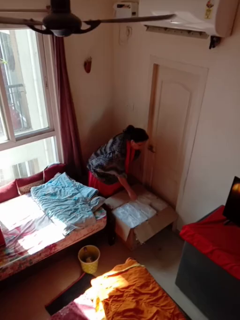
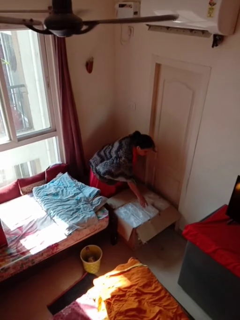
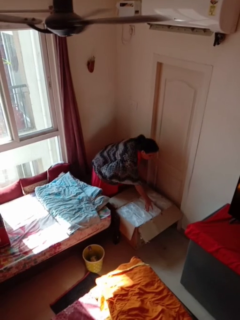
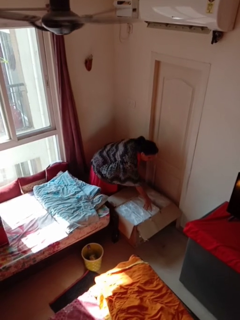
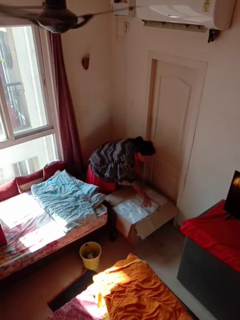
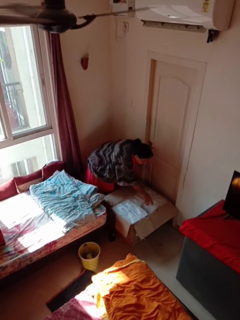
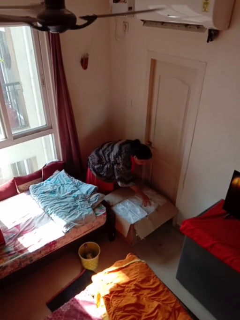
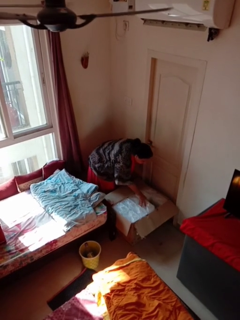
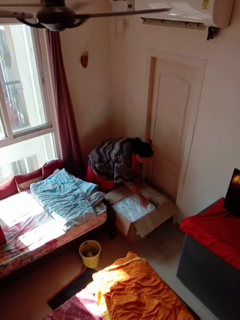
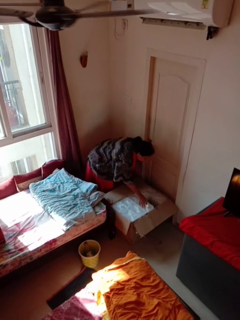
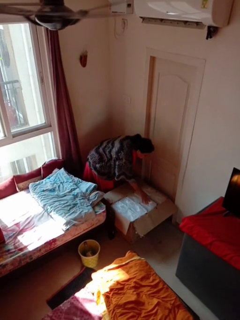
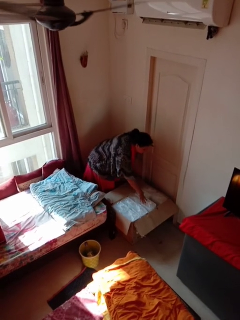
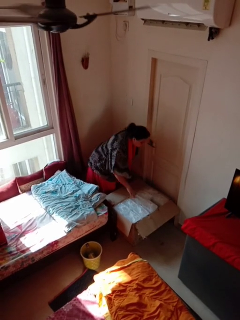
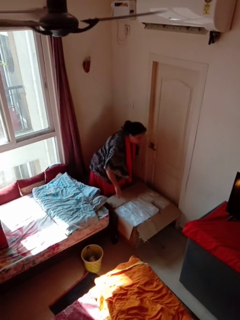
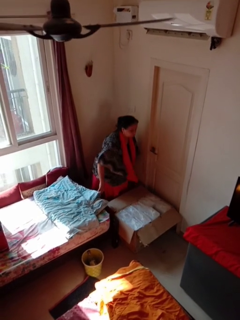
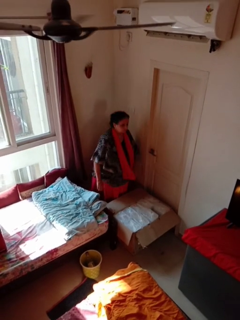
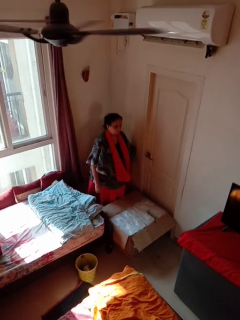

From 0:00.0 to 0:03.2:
person searches in box

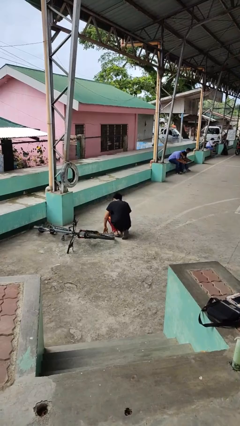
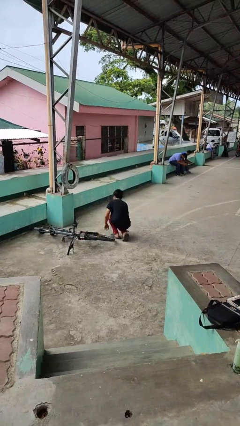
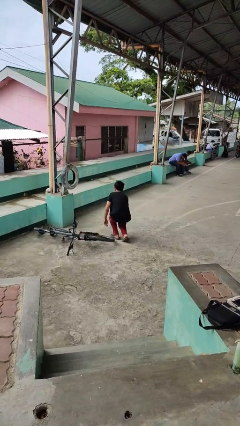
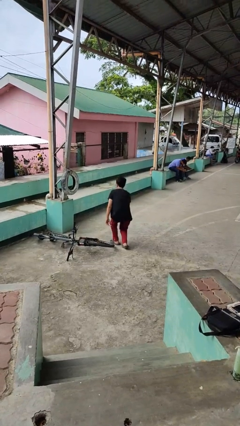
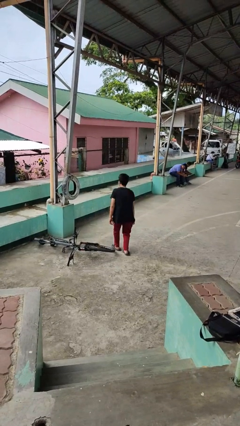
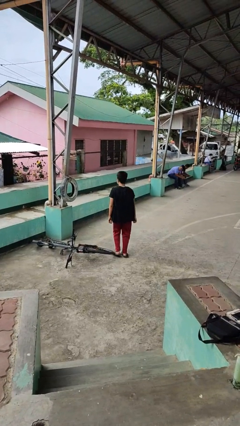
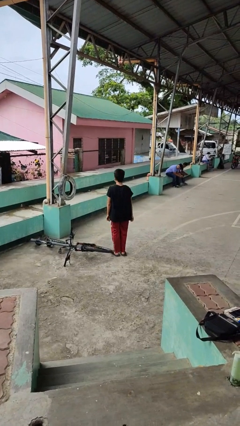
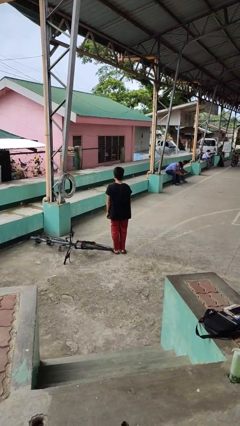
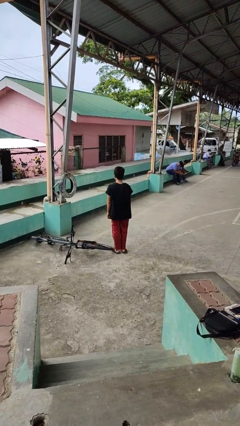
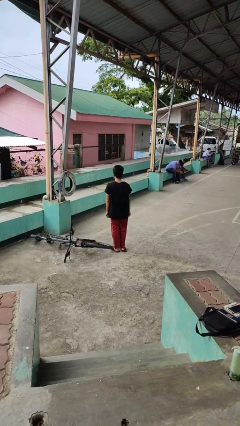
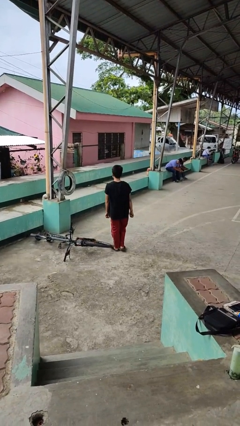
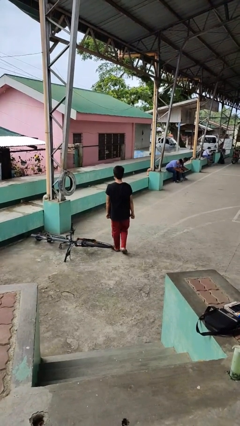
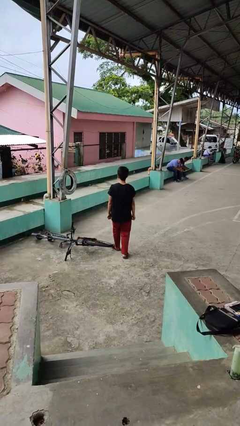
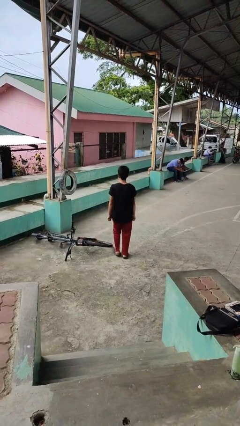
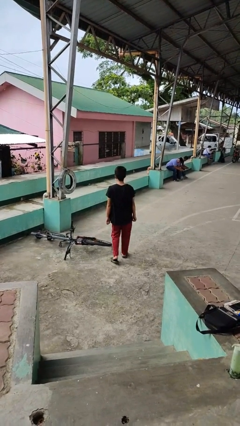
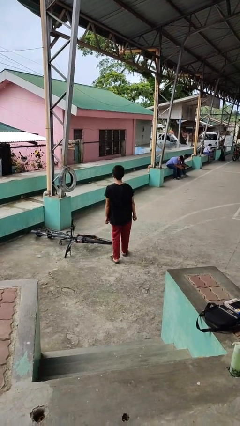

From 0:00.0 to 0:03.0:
person stands up from floor

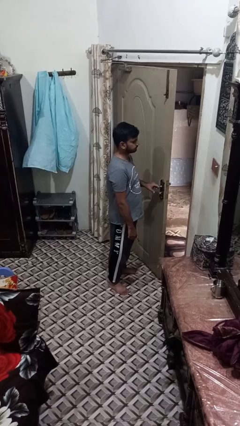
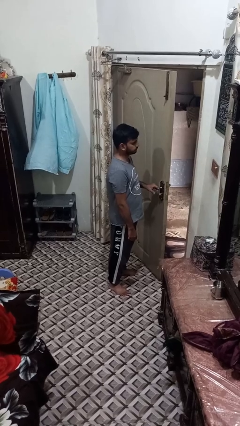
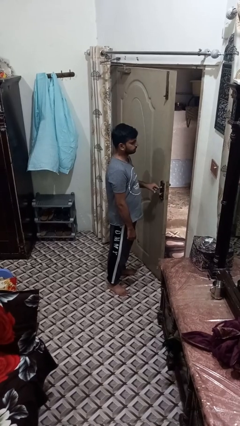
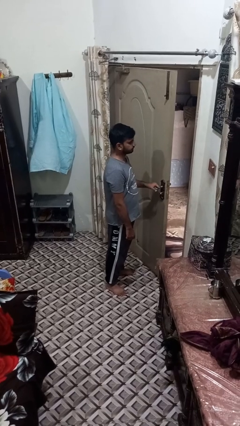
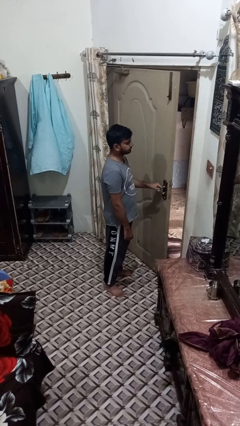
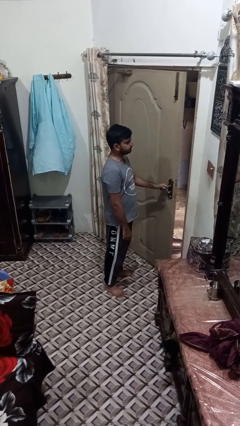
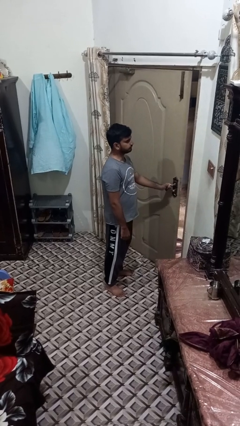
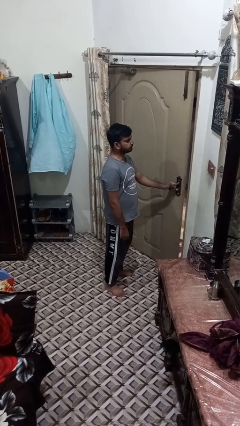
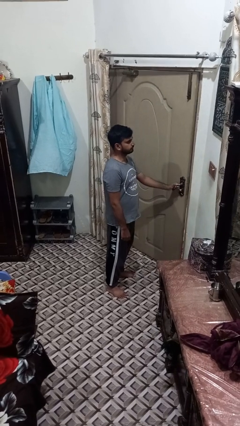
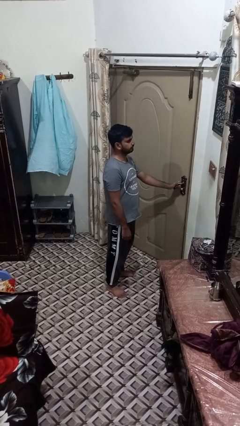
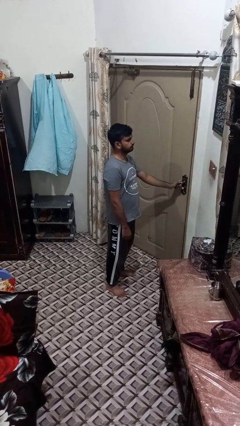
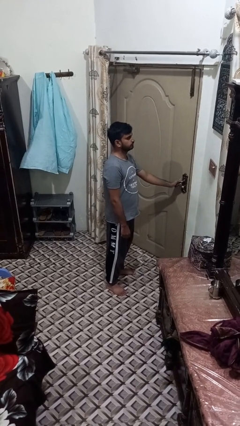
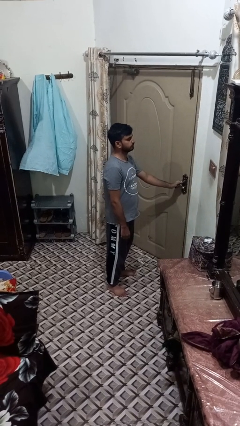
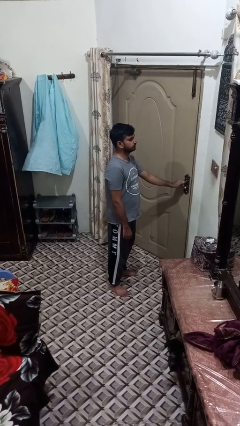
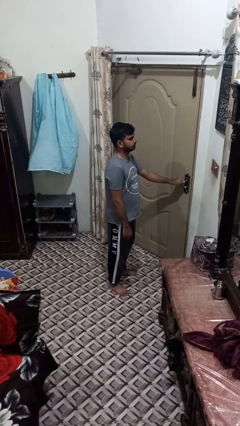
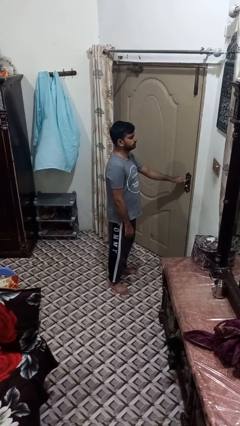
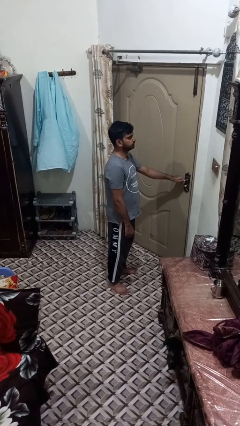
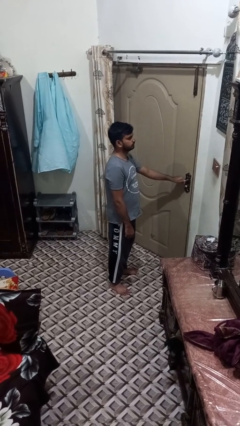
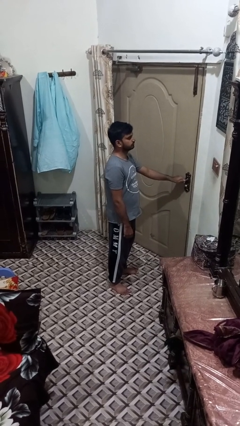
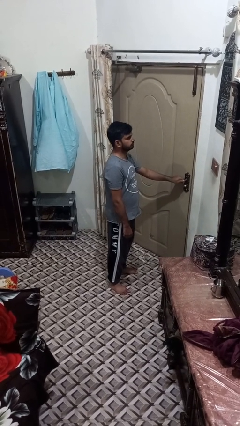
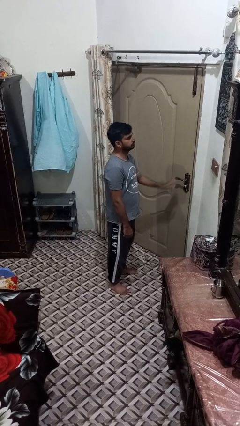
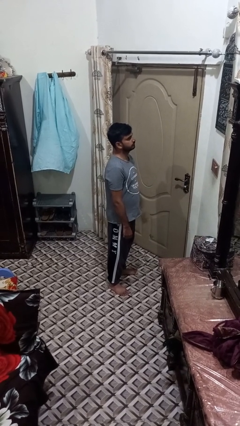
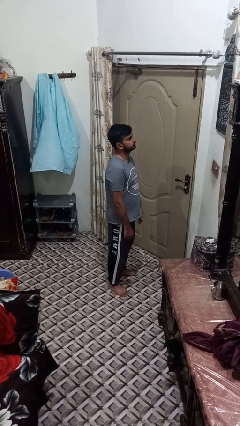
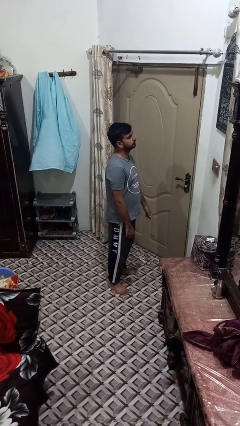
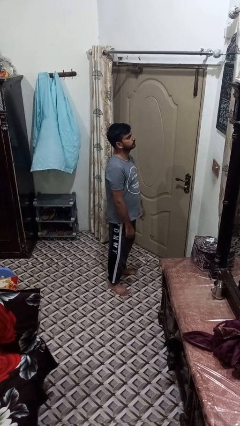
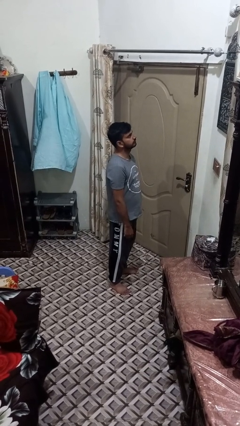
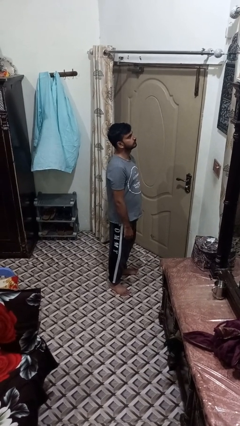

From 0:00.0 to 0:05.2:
person closes gate

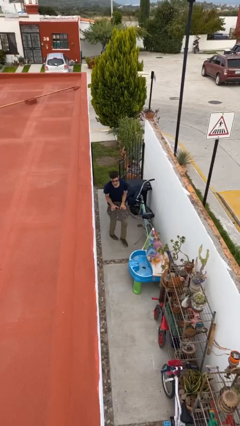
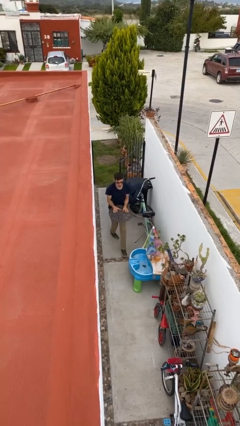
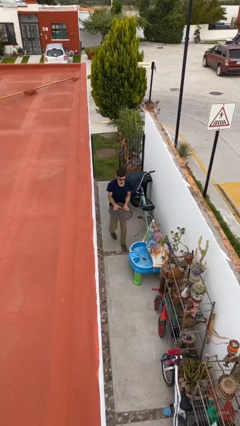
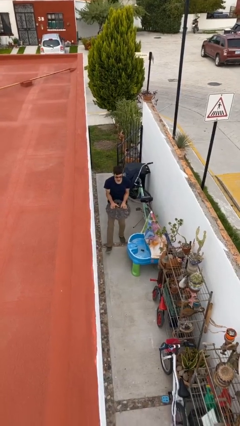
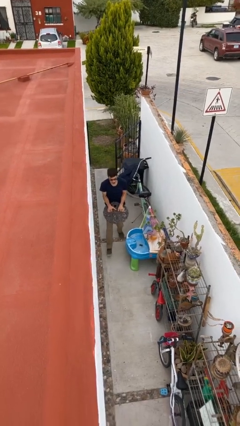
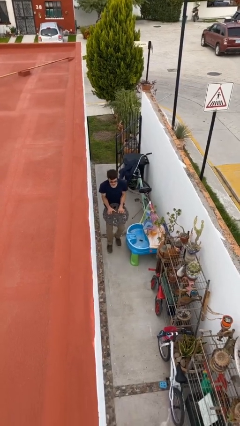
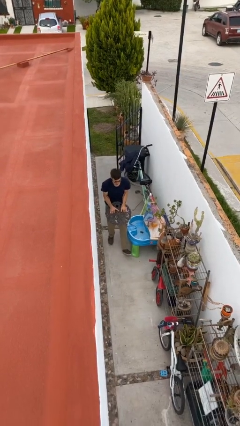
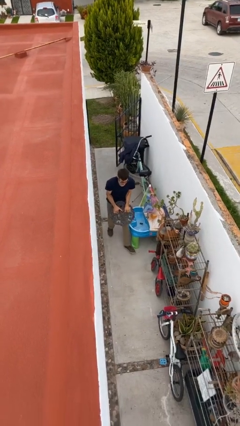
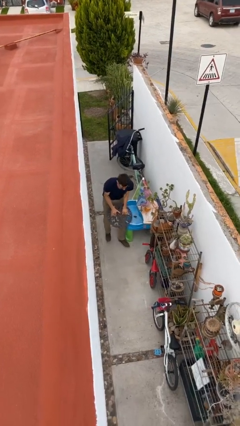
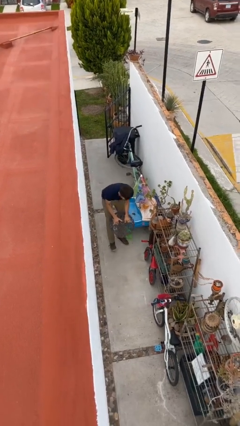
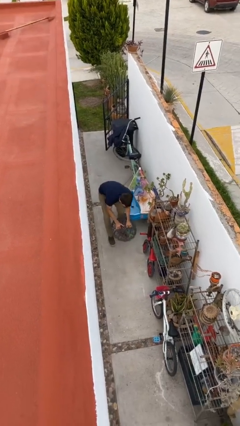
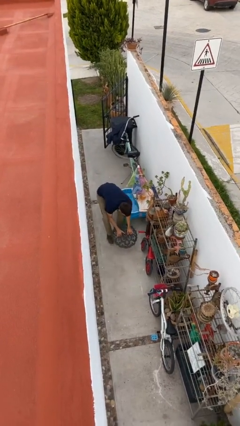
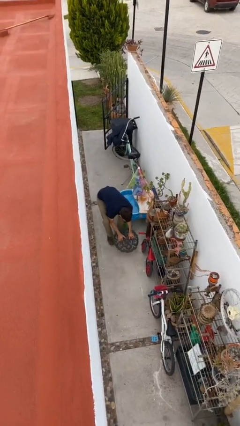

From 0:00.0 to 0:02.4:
person carries heavy object

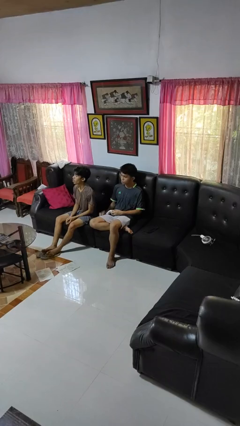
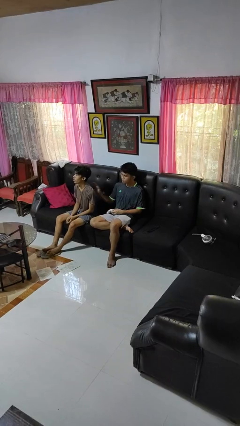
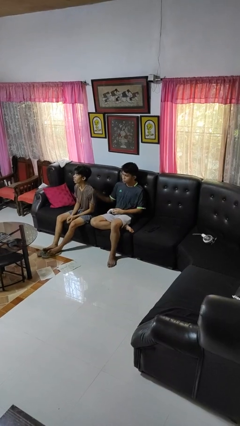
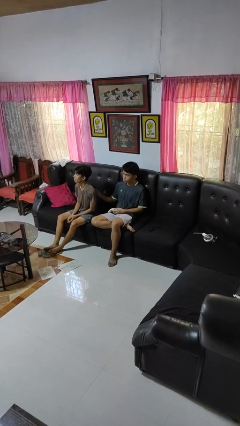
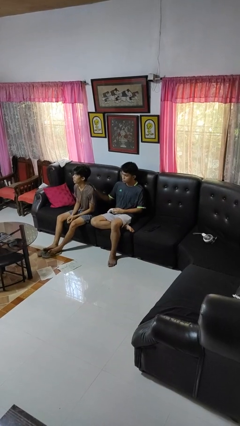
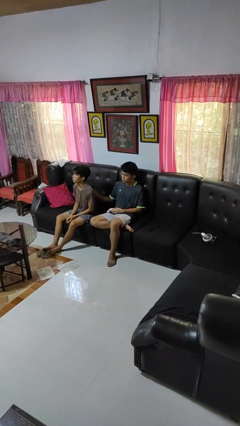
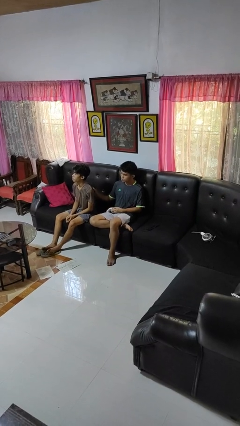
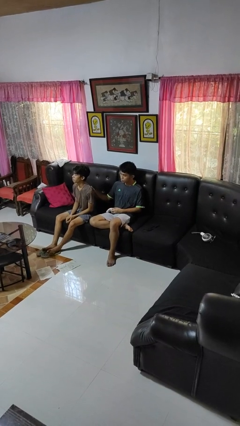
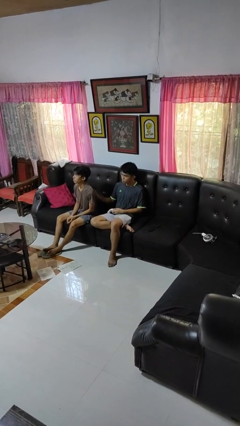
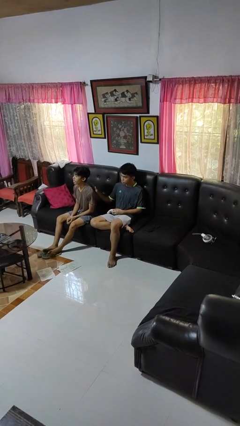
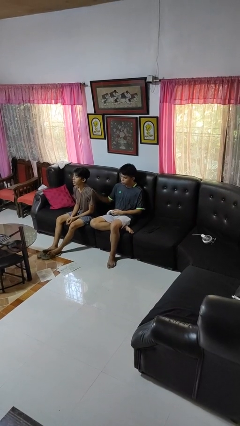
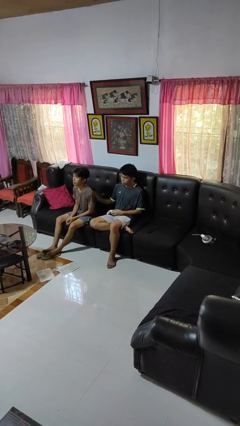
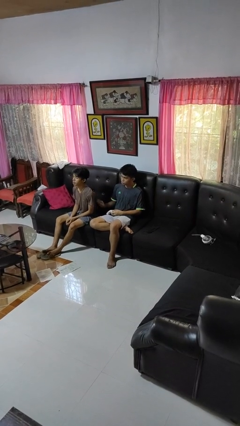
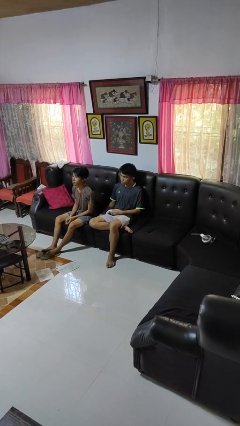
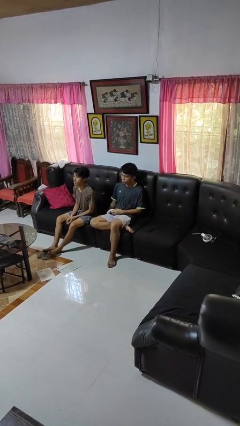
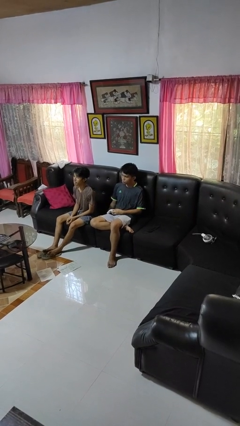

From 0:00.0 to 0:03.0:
person touches back of person

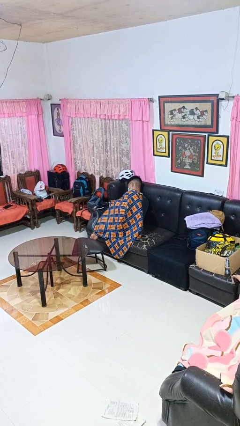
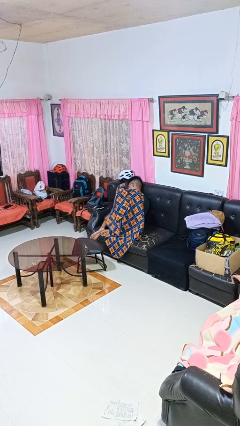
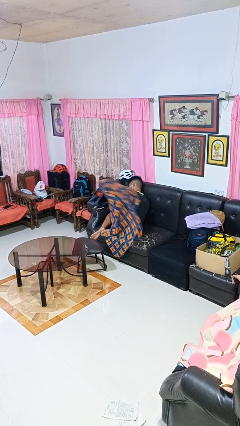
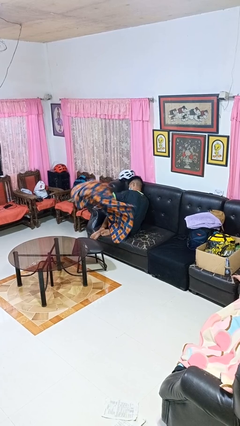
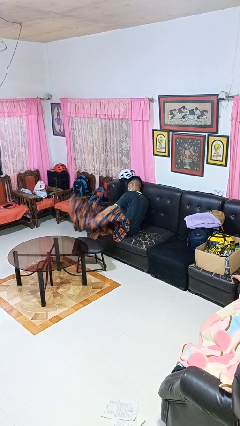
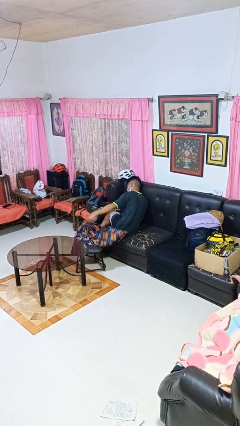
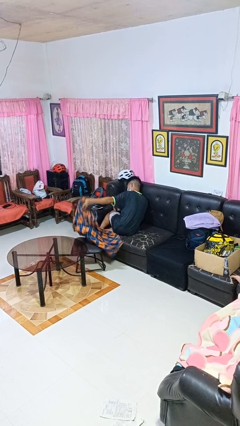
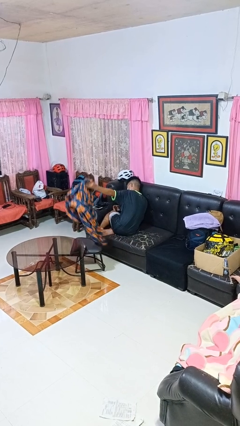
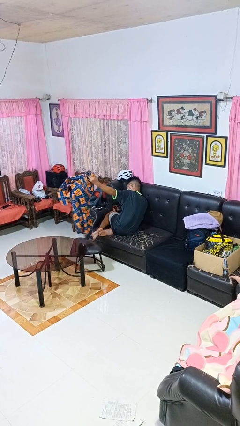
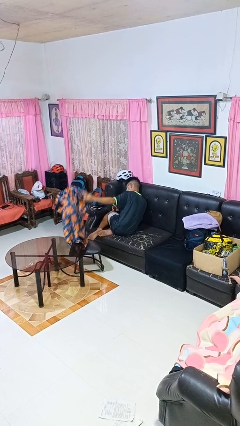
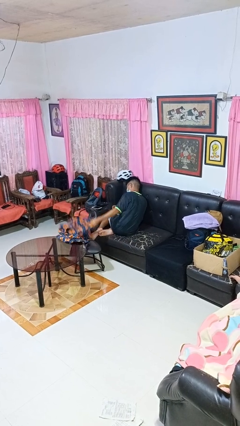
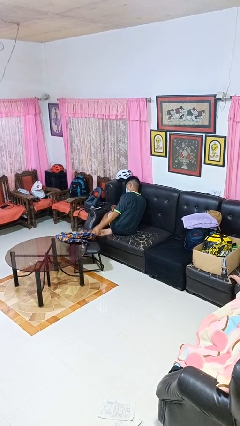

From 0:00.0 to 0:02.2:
person uncovers with blanket
